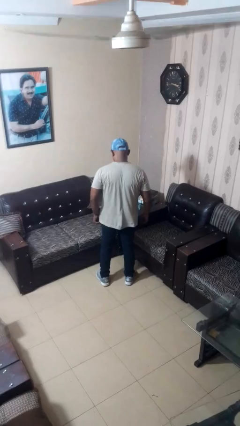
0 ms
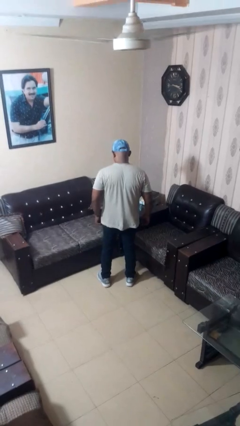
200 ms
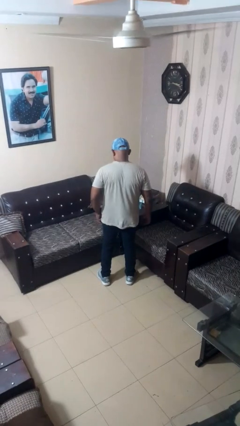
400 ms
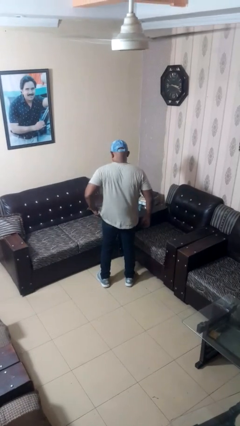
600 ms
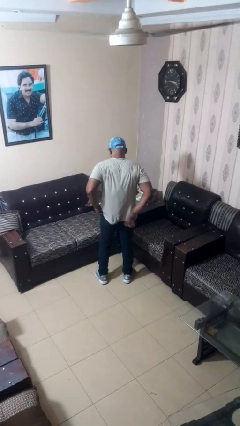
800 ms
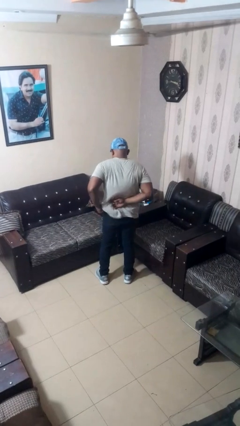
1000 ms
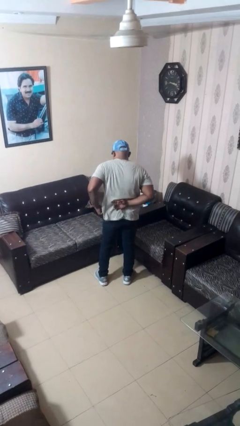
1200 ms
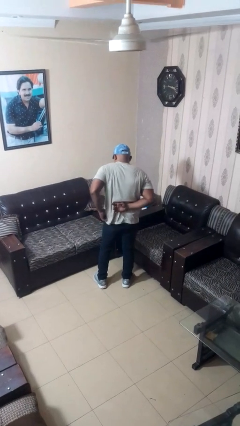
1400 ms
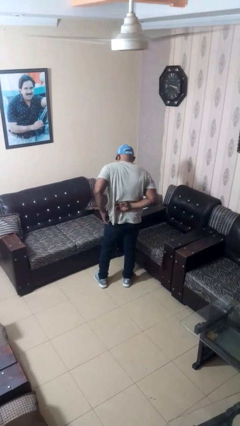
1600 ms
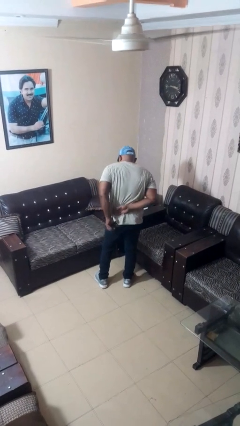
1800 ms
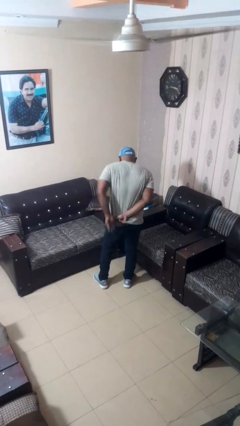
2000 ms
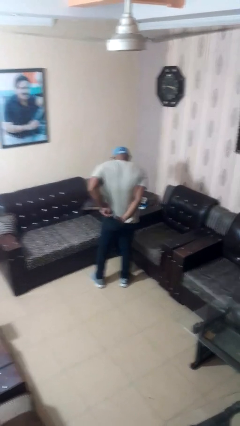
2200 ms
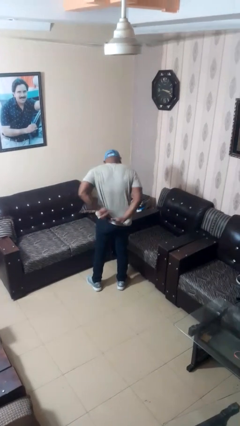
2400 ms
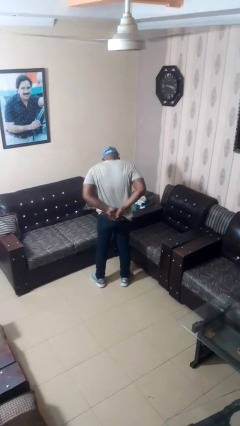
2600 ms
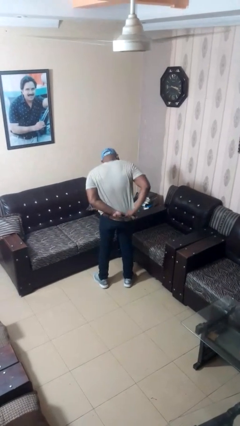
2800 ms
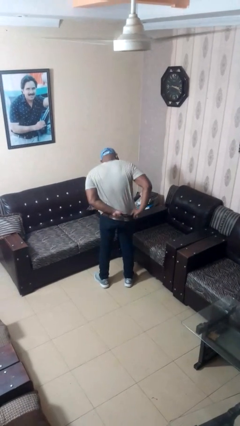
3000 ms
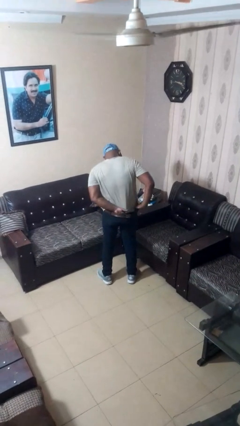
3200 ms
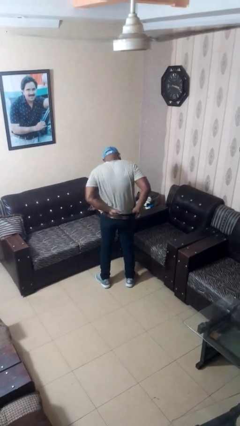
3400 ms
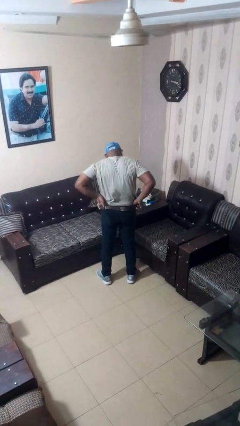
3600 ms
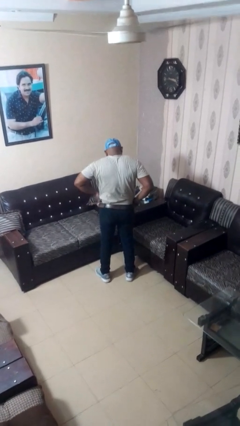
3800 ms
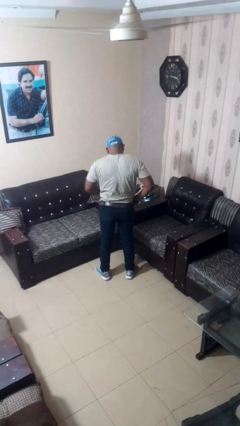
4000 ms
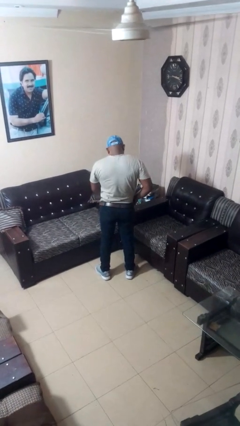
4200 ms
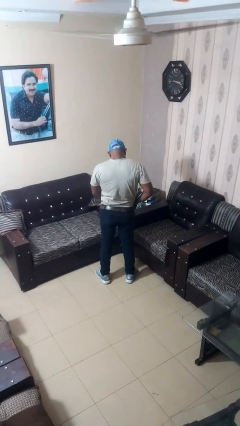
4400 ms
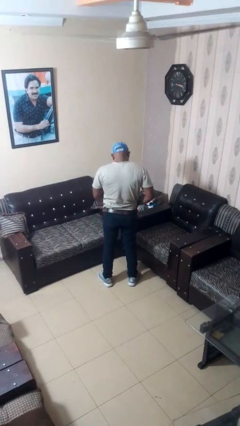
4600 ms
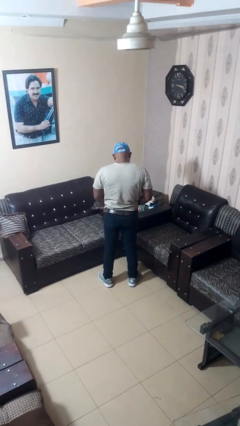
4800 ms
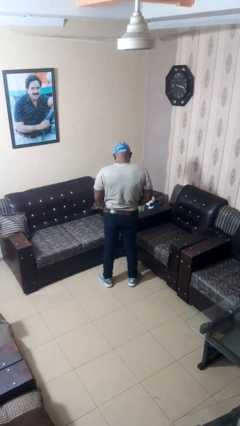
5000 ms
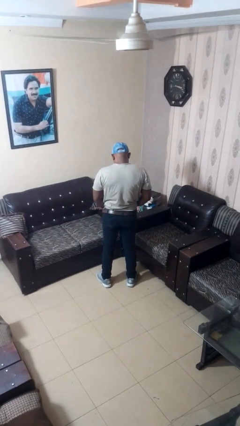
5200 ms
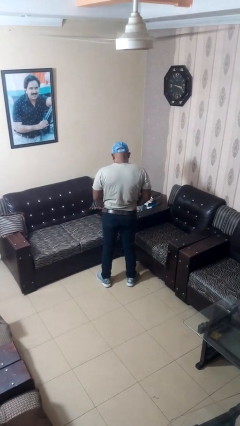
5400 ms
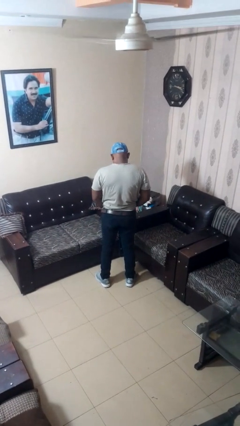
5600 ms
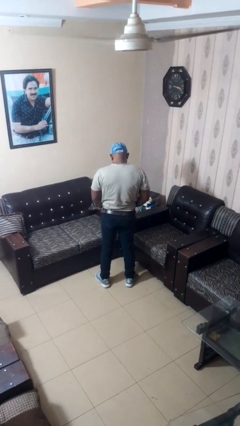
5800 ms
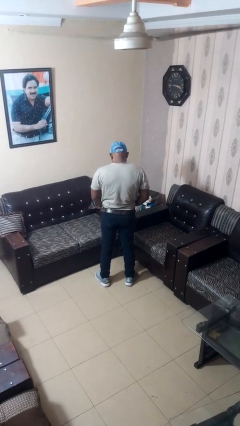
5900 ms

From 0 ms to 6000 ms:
person tucks in shirt

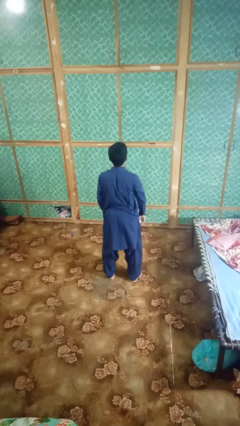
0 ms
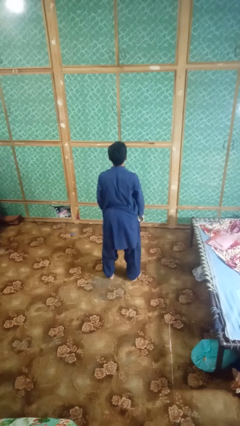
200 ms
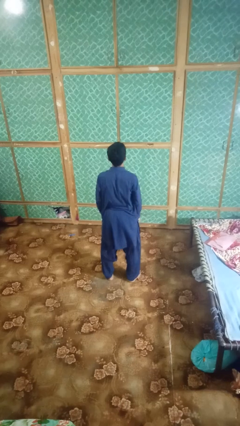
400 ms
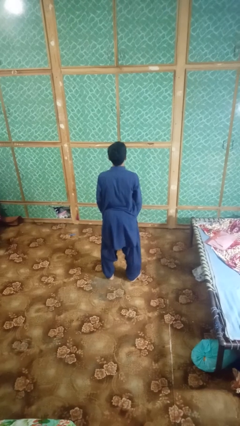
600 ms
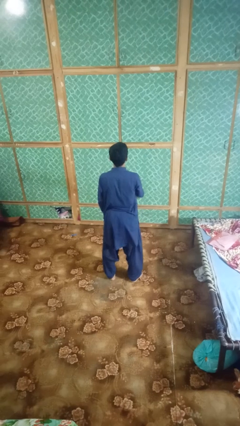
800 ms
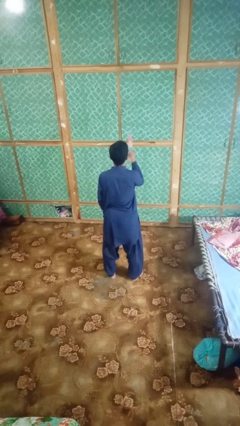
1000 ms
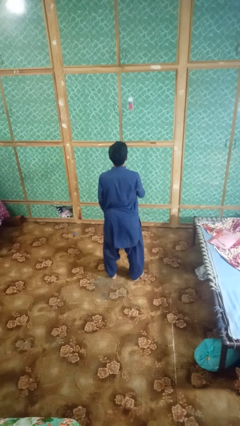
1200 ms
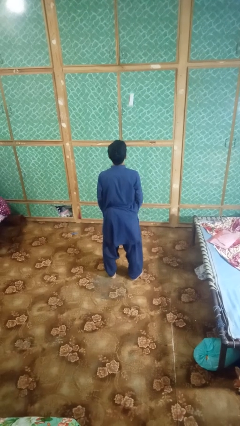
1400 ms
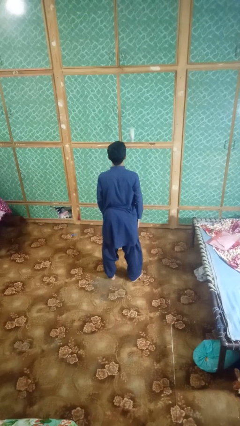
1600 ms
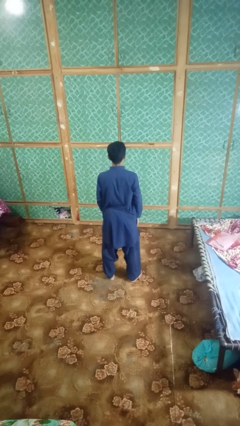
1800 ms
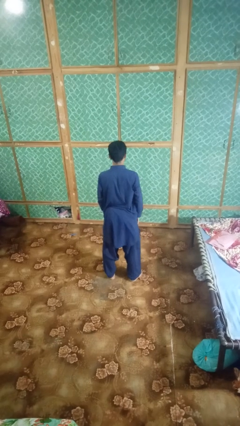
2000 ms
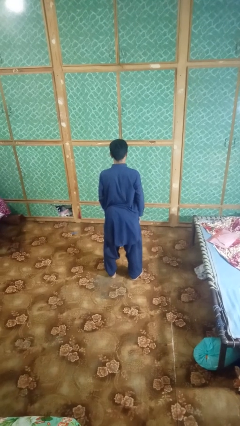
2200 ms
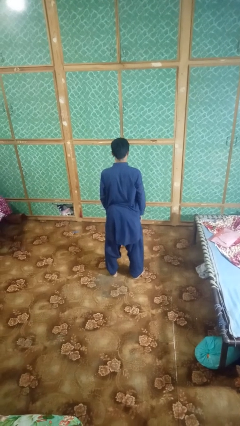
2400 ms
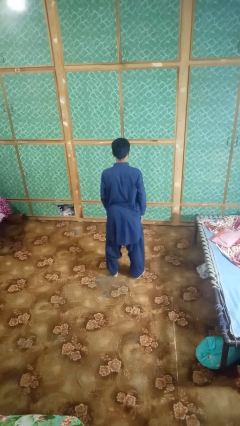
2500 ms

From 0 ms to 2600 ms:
person throws object into air

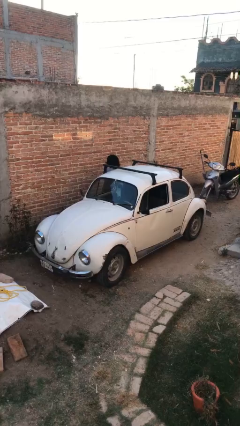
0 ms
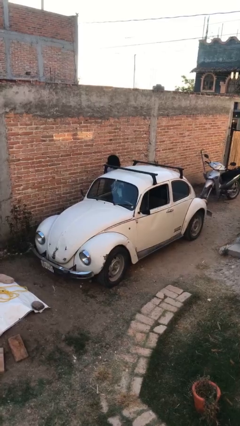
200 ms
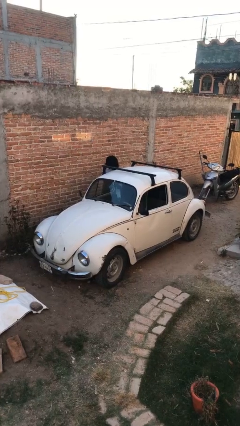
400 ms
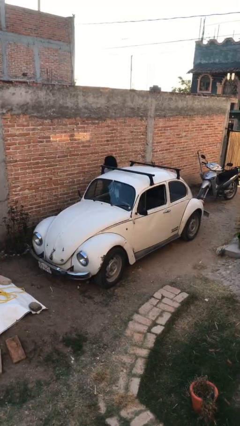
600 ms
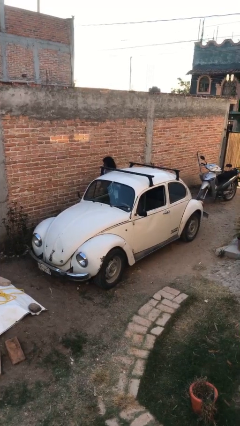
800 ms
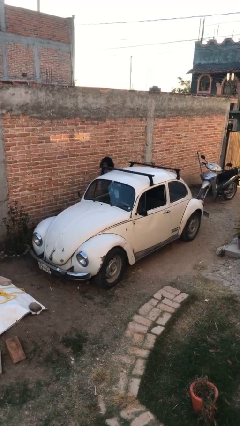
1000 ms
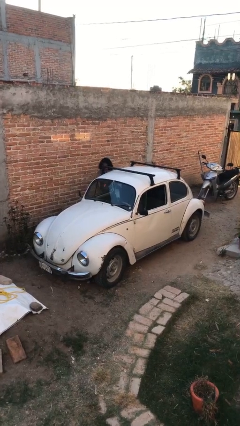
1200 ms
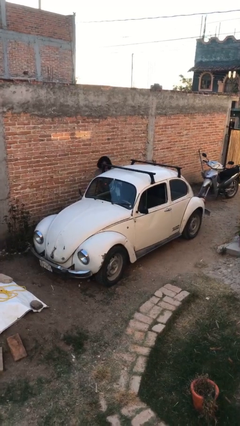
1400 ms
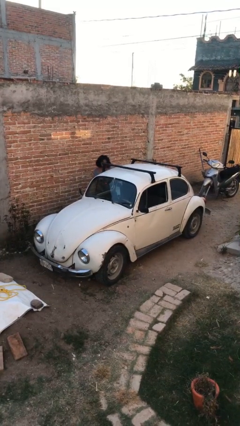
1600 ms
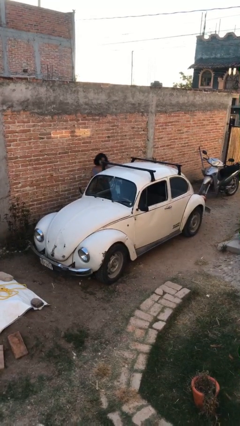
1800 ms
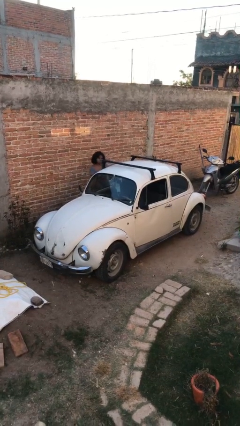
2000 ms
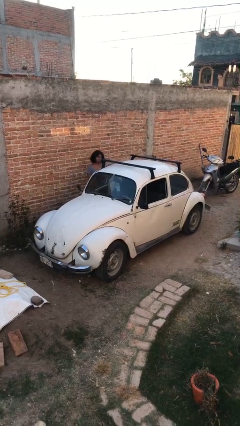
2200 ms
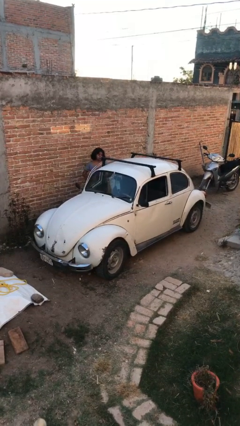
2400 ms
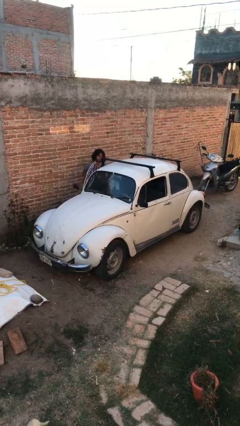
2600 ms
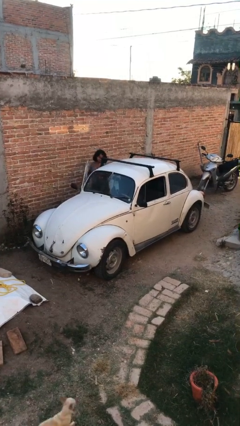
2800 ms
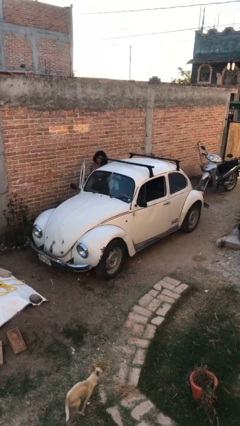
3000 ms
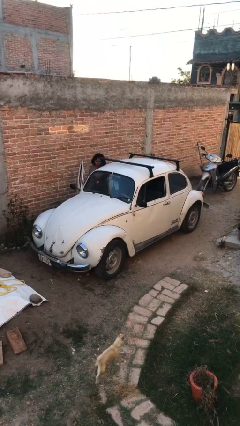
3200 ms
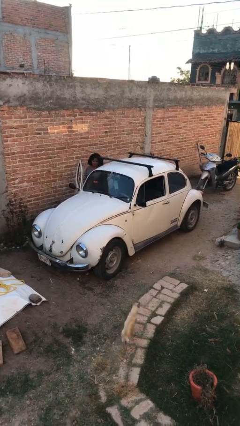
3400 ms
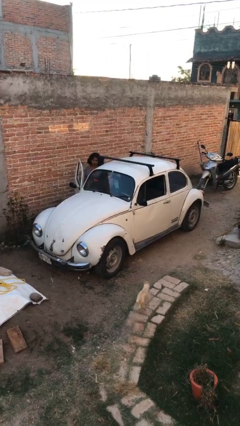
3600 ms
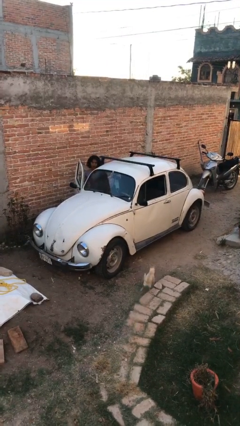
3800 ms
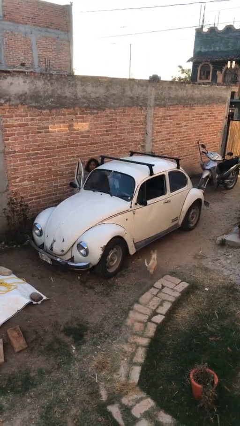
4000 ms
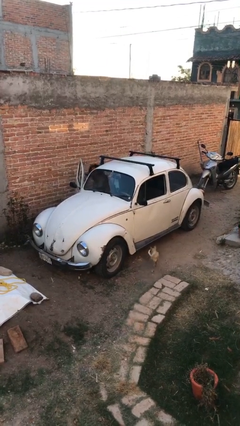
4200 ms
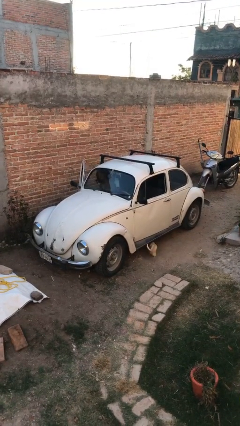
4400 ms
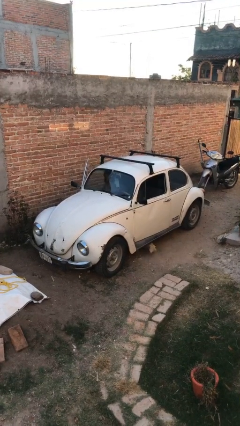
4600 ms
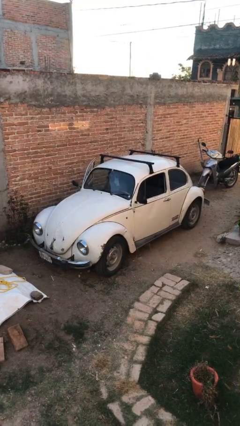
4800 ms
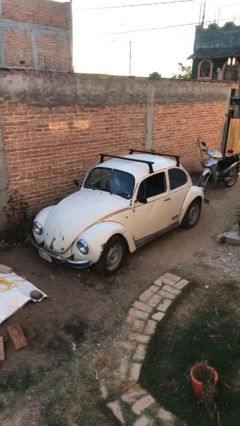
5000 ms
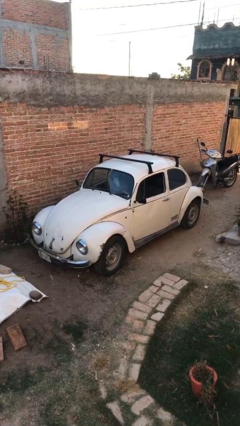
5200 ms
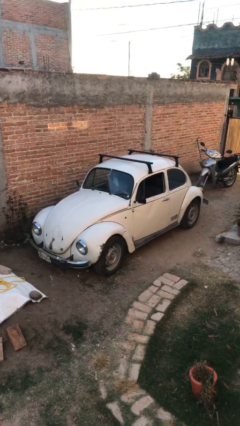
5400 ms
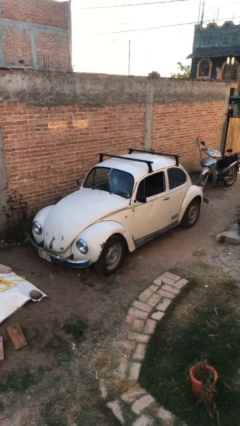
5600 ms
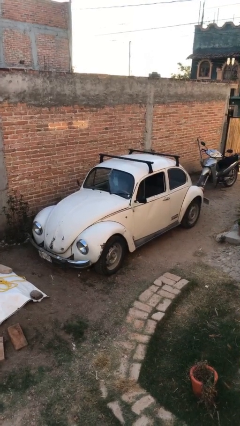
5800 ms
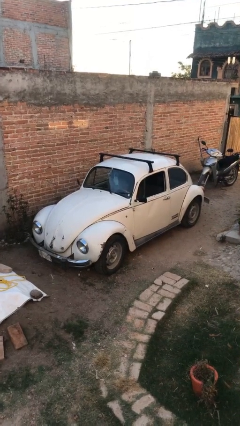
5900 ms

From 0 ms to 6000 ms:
car picks up person

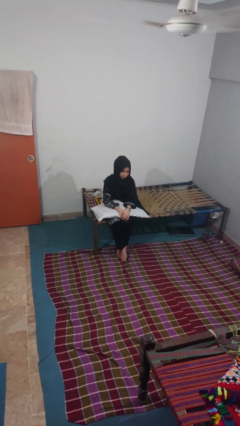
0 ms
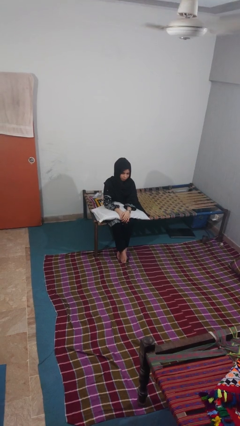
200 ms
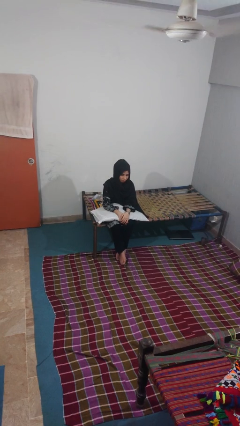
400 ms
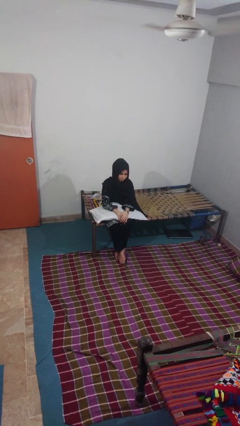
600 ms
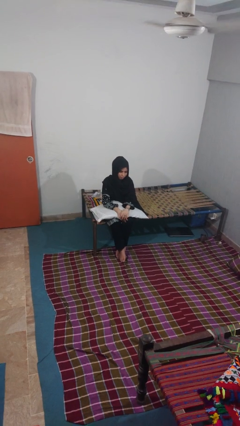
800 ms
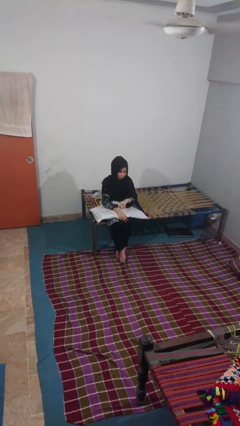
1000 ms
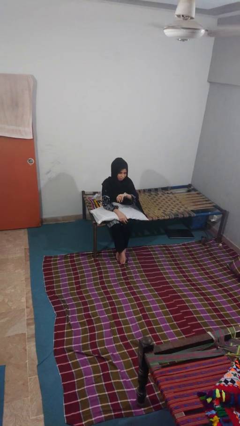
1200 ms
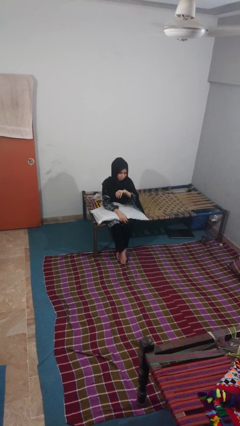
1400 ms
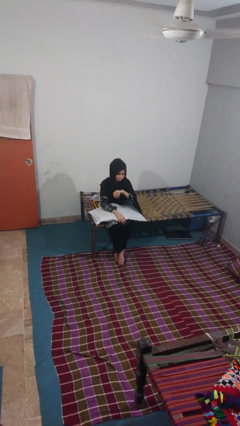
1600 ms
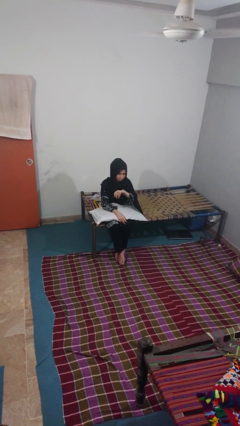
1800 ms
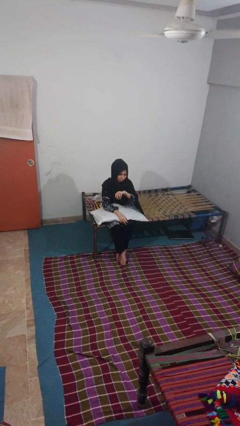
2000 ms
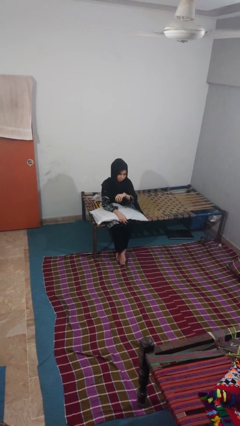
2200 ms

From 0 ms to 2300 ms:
person looks at wristwatch
